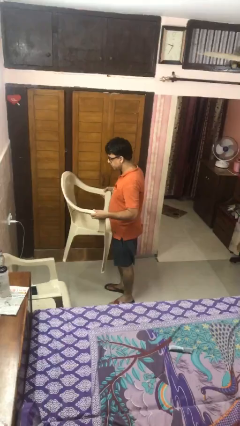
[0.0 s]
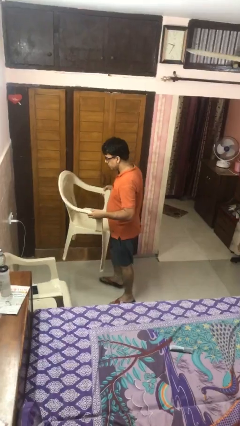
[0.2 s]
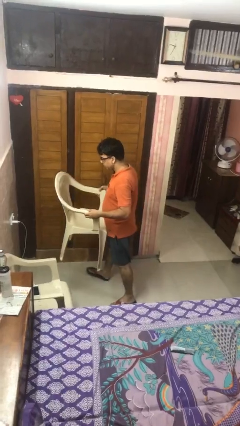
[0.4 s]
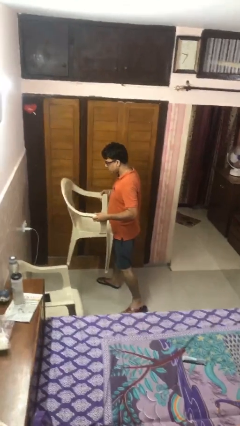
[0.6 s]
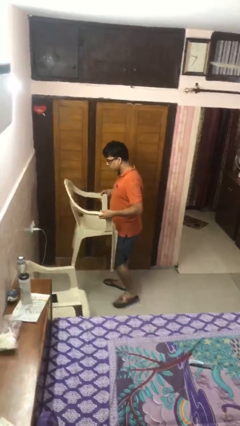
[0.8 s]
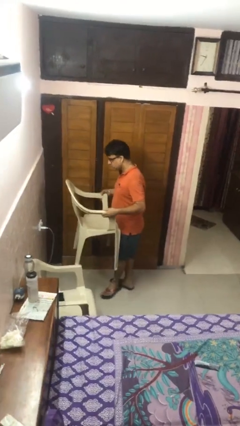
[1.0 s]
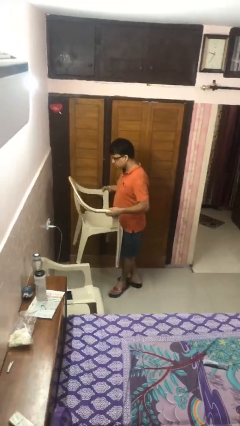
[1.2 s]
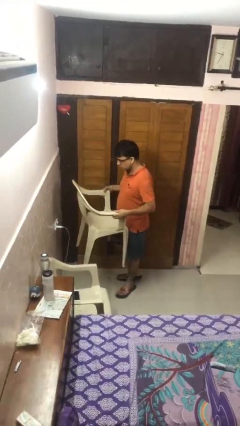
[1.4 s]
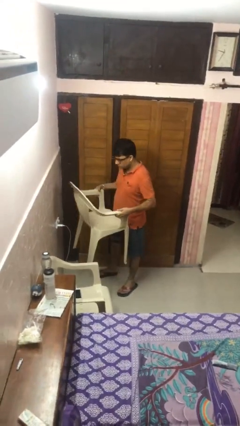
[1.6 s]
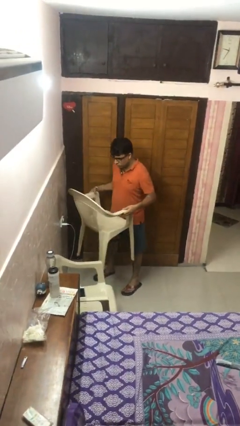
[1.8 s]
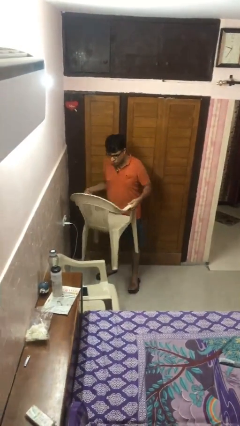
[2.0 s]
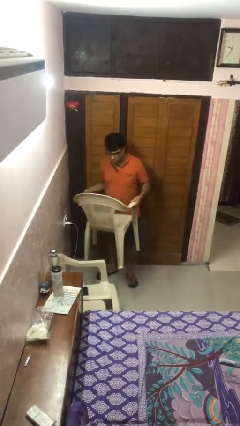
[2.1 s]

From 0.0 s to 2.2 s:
person carries furniture

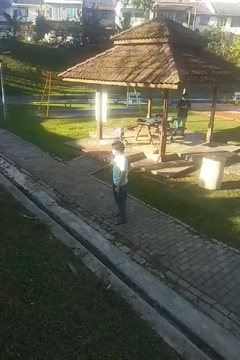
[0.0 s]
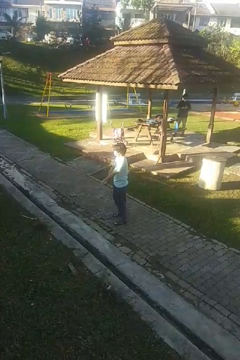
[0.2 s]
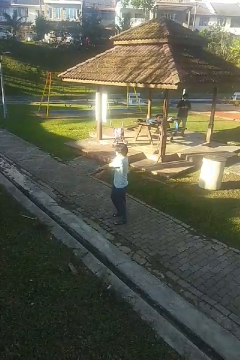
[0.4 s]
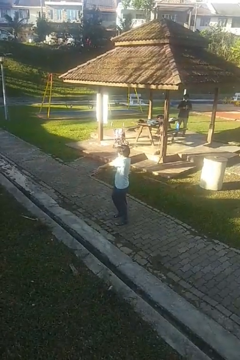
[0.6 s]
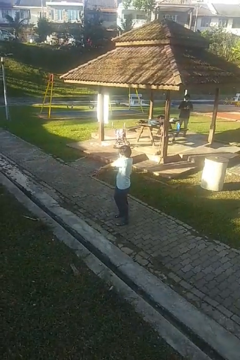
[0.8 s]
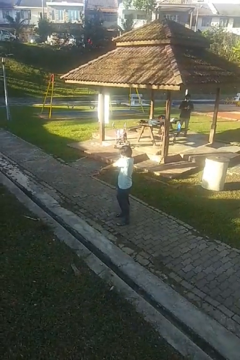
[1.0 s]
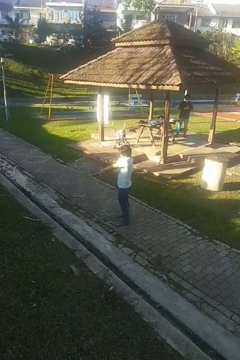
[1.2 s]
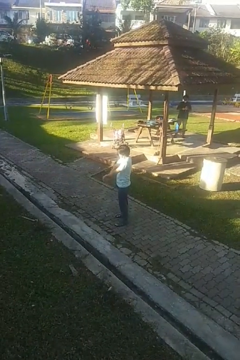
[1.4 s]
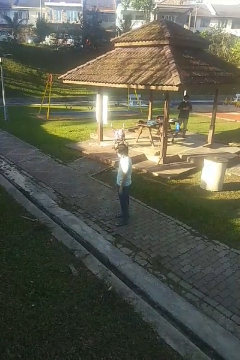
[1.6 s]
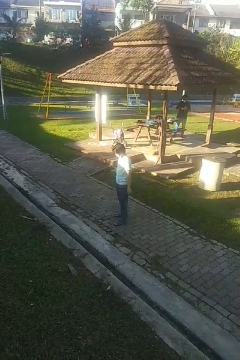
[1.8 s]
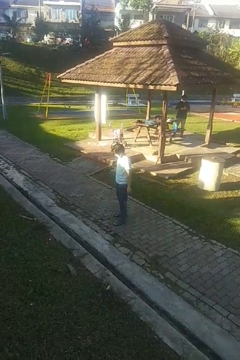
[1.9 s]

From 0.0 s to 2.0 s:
person crosses arms

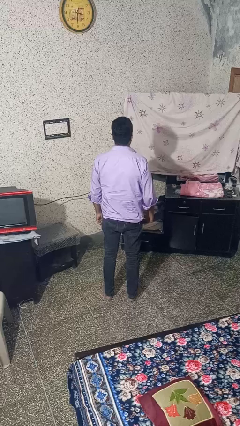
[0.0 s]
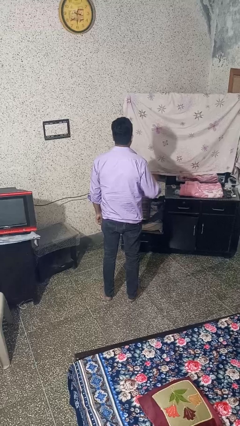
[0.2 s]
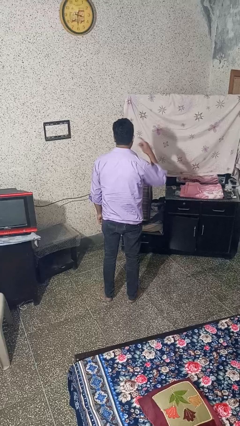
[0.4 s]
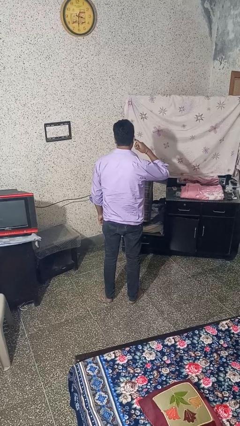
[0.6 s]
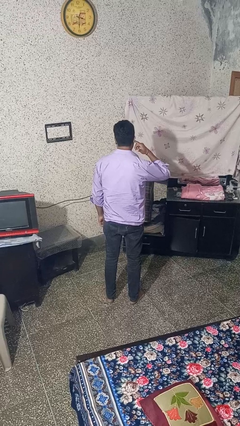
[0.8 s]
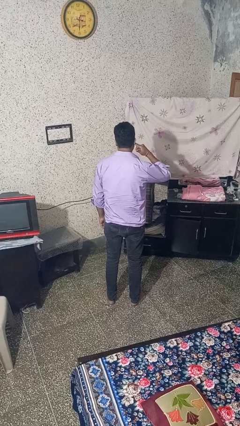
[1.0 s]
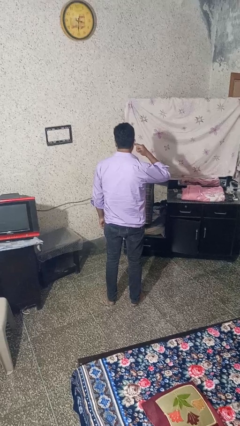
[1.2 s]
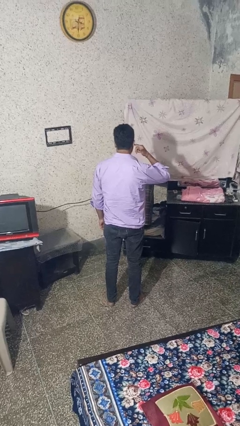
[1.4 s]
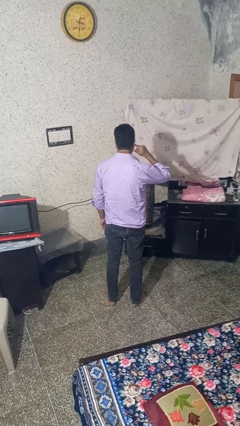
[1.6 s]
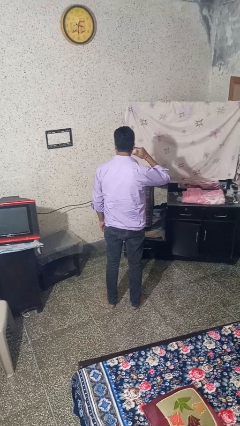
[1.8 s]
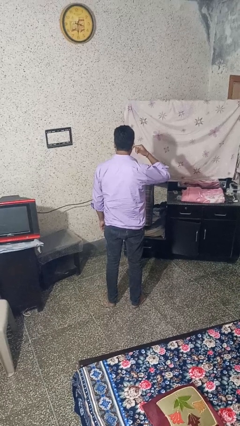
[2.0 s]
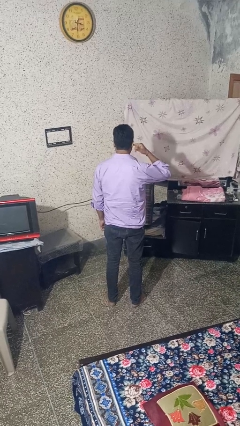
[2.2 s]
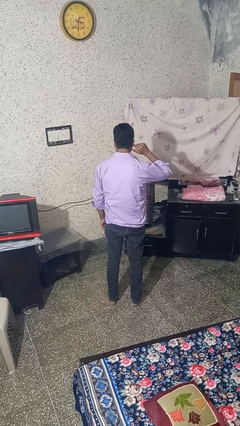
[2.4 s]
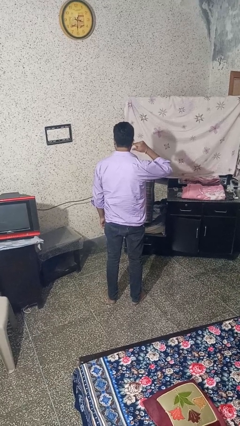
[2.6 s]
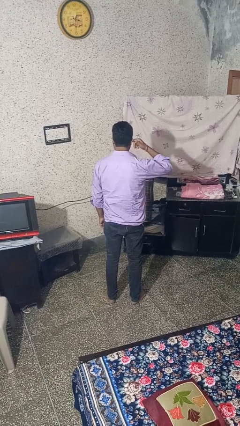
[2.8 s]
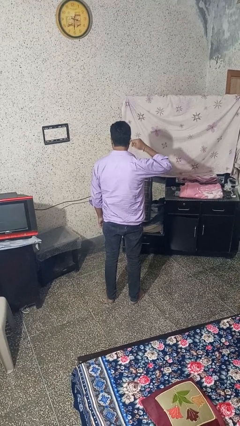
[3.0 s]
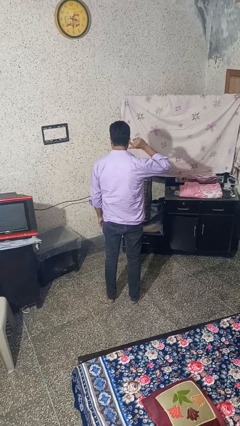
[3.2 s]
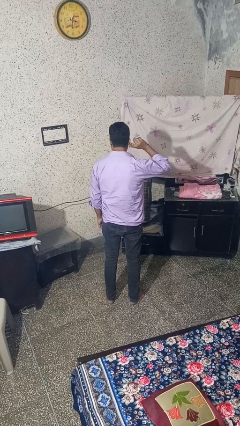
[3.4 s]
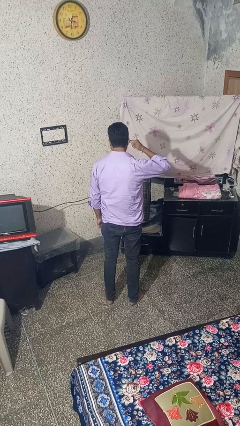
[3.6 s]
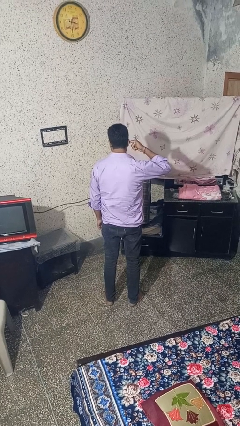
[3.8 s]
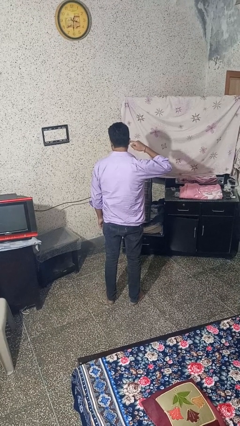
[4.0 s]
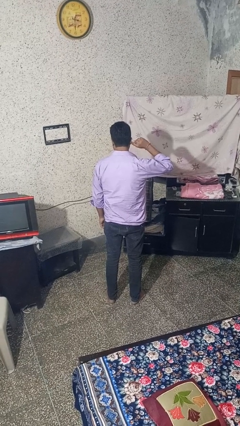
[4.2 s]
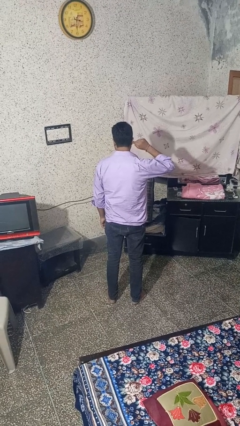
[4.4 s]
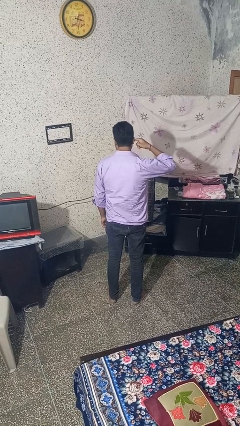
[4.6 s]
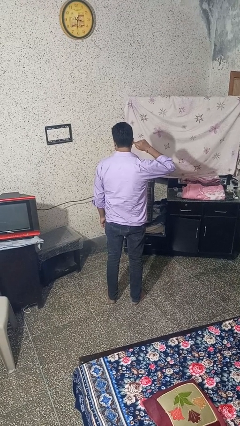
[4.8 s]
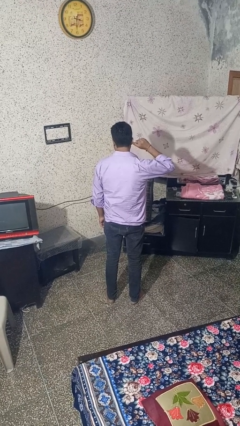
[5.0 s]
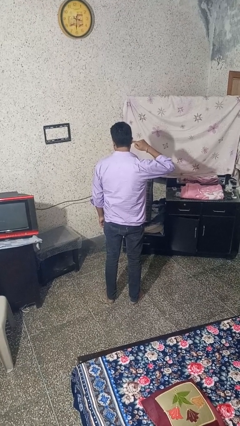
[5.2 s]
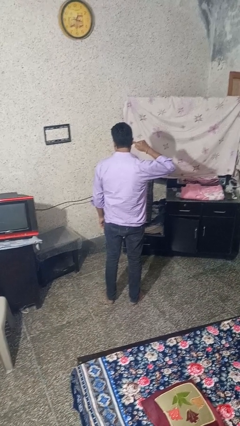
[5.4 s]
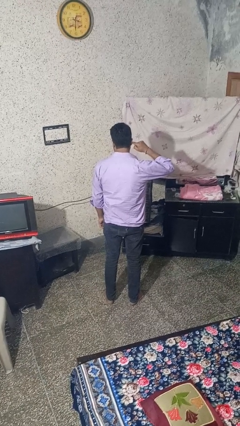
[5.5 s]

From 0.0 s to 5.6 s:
person puts fingers in ear

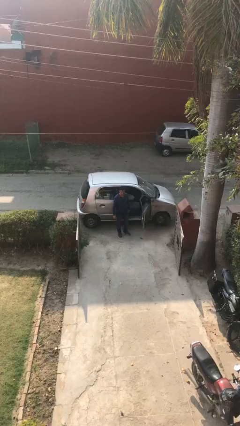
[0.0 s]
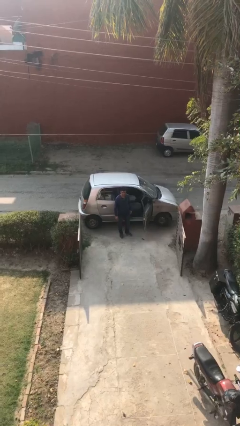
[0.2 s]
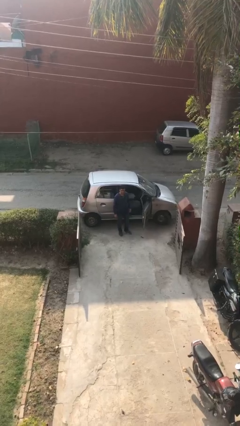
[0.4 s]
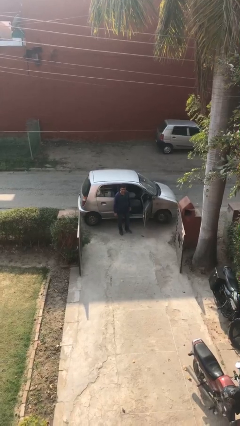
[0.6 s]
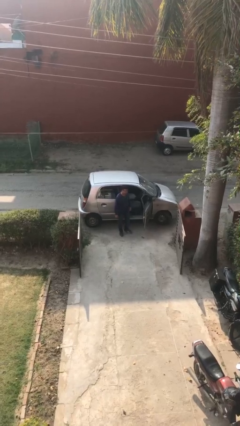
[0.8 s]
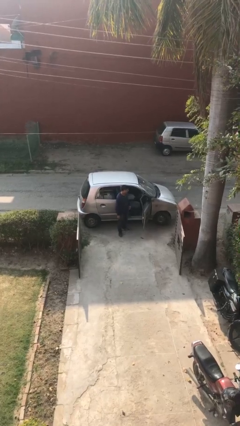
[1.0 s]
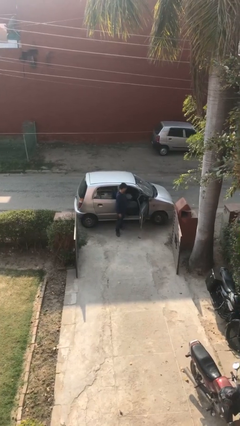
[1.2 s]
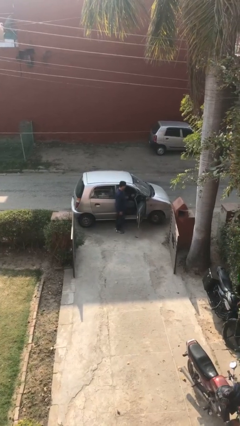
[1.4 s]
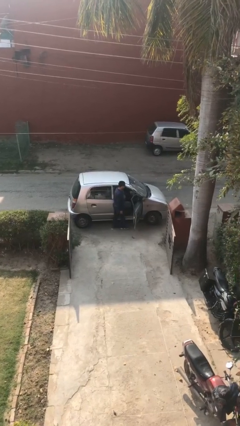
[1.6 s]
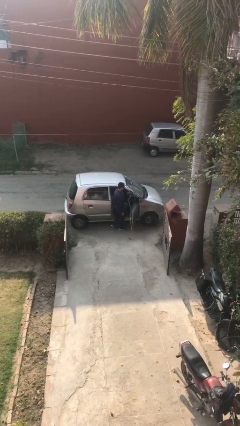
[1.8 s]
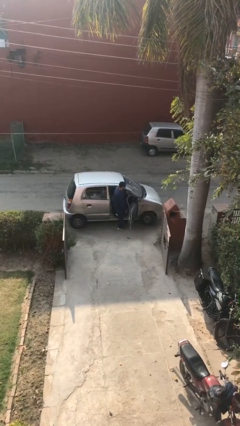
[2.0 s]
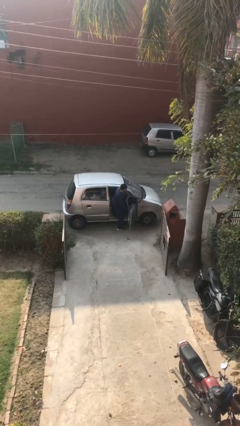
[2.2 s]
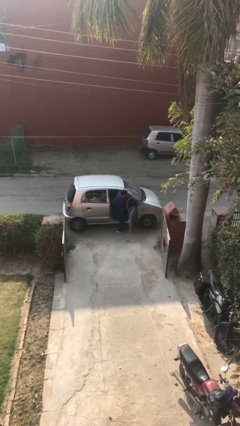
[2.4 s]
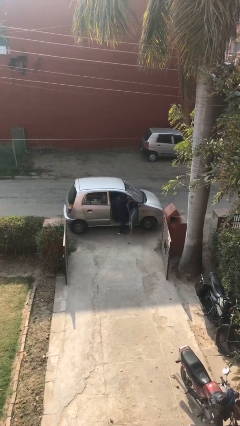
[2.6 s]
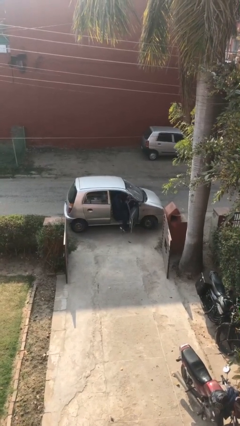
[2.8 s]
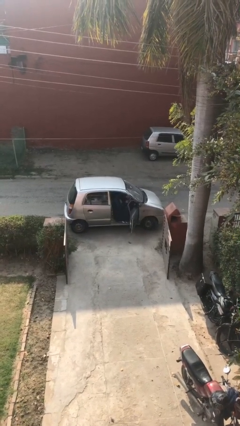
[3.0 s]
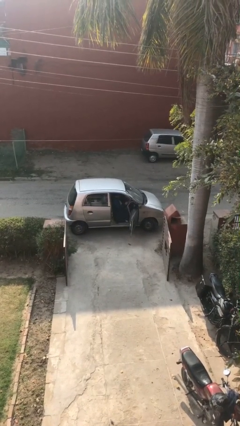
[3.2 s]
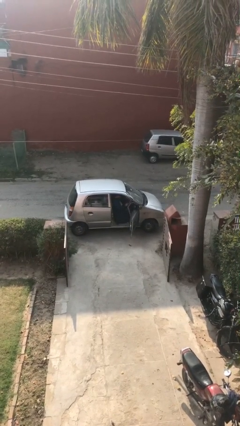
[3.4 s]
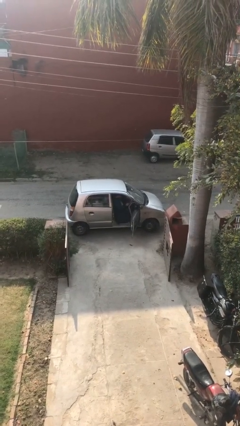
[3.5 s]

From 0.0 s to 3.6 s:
person enters car

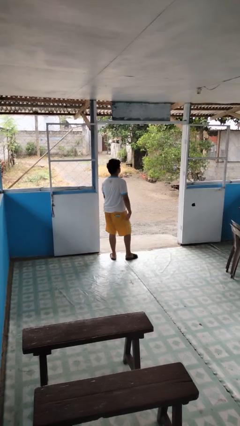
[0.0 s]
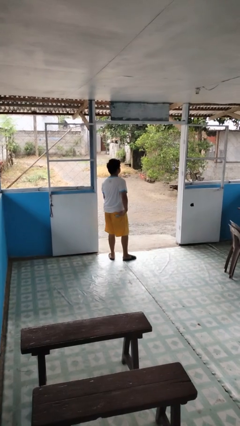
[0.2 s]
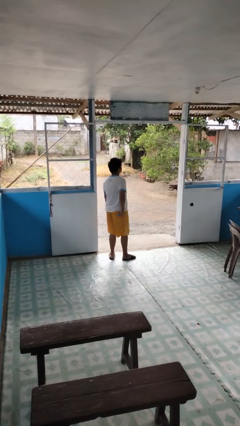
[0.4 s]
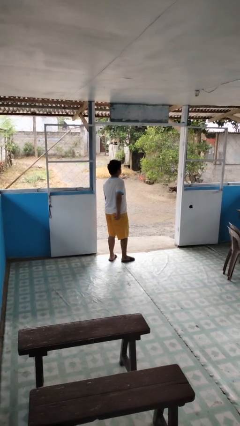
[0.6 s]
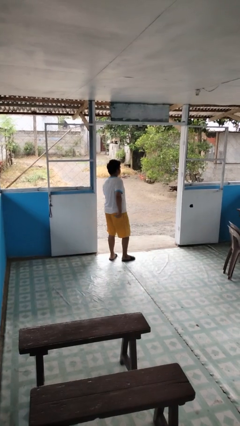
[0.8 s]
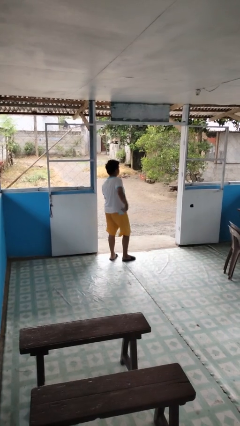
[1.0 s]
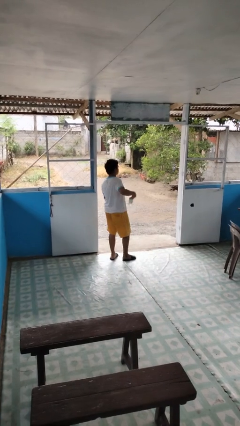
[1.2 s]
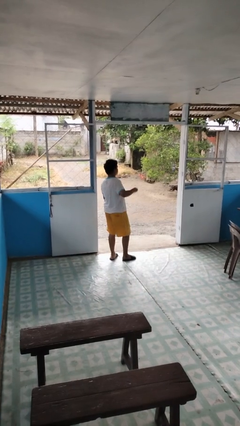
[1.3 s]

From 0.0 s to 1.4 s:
person takes phone from pocket

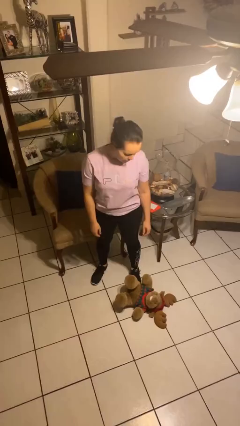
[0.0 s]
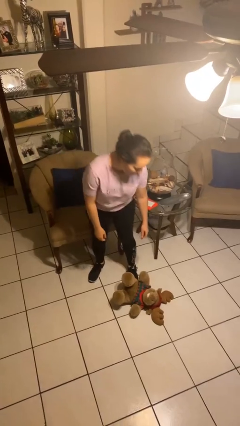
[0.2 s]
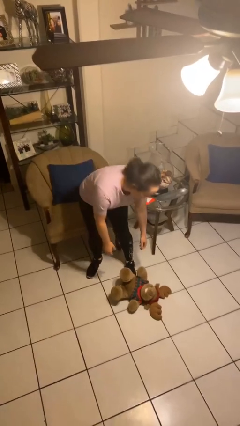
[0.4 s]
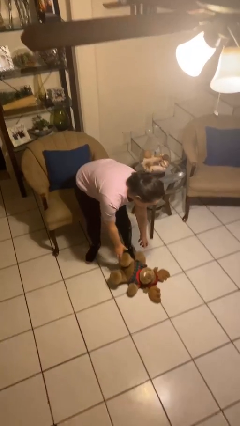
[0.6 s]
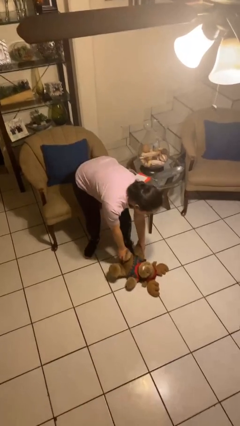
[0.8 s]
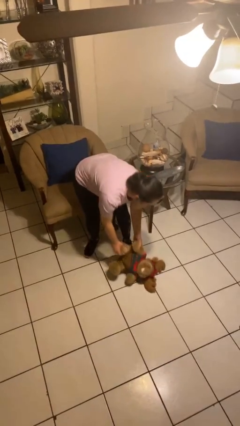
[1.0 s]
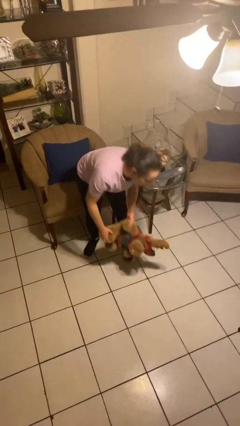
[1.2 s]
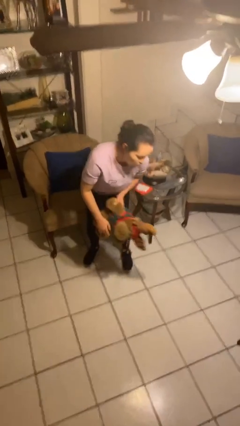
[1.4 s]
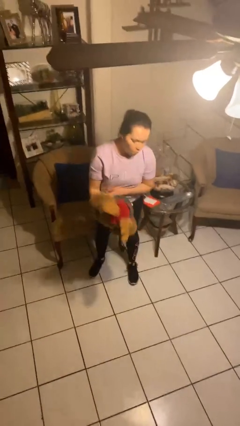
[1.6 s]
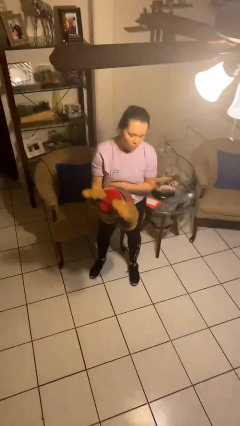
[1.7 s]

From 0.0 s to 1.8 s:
person picks up object from floor

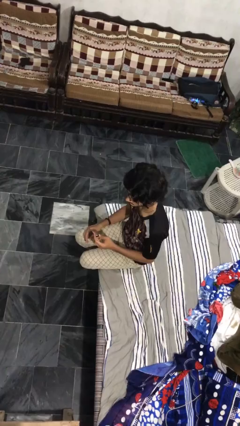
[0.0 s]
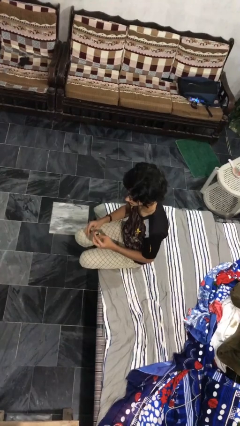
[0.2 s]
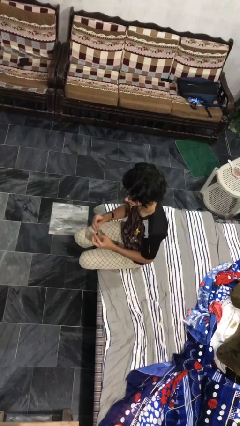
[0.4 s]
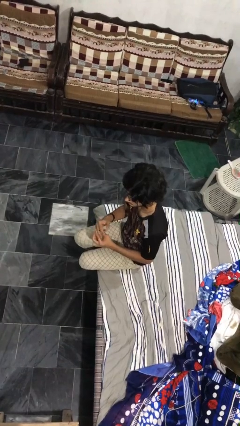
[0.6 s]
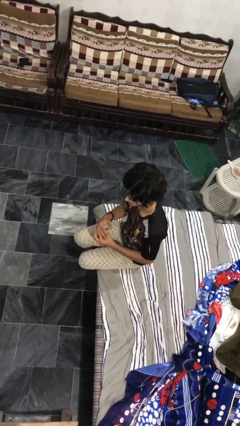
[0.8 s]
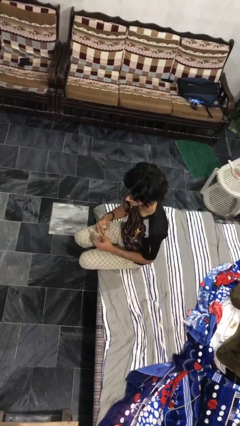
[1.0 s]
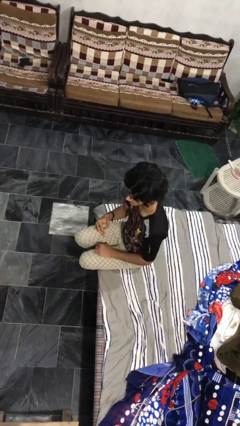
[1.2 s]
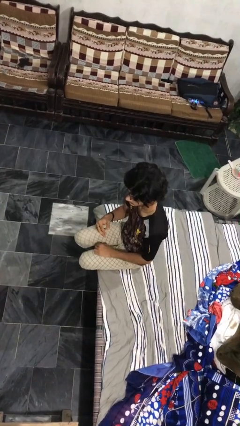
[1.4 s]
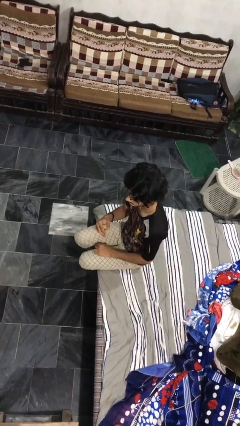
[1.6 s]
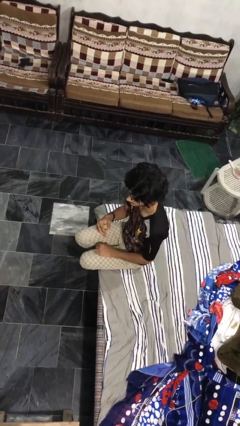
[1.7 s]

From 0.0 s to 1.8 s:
person puts on ring
